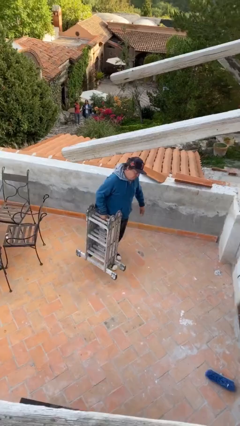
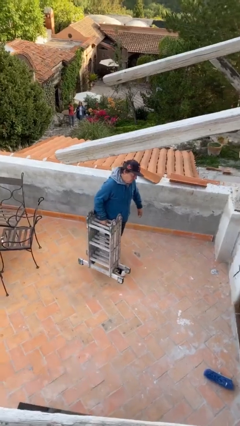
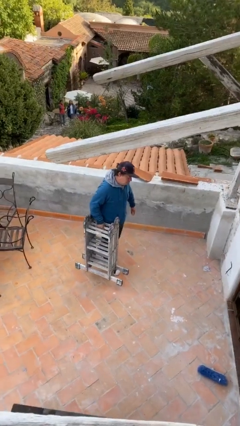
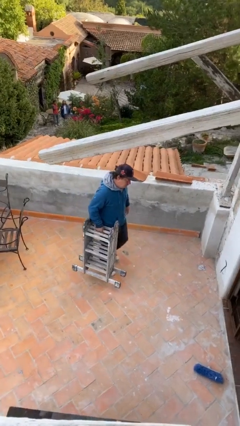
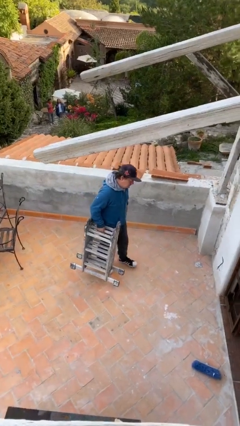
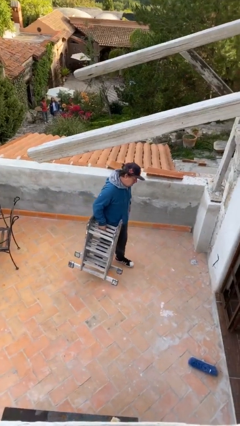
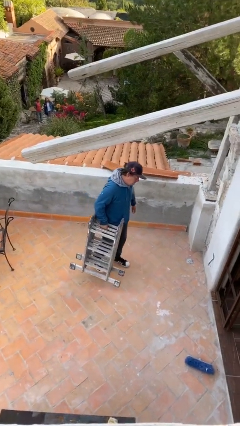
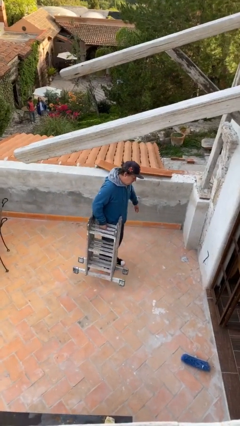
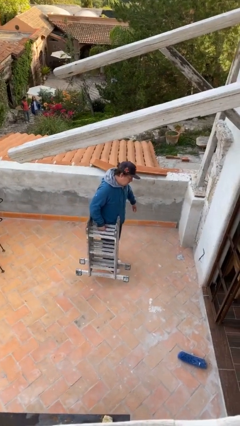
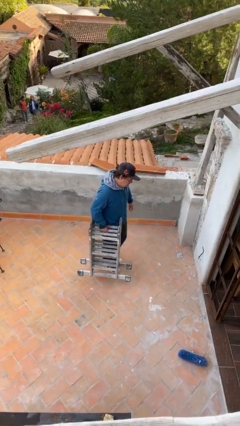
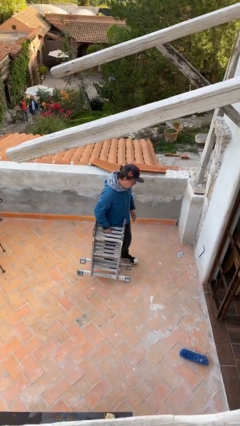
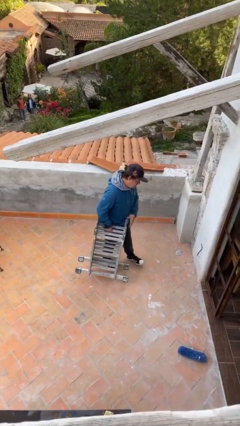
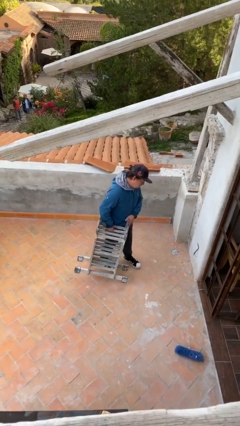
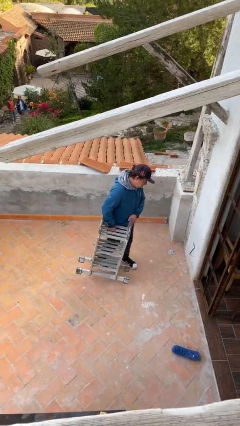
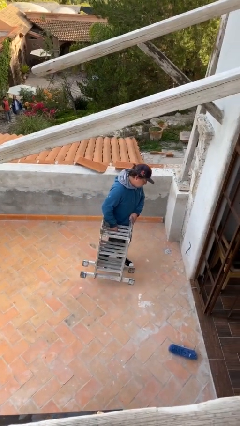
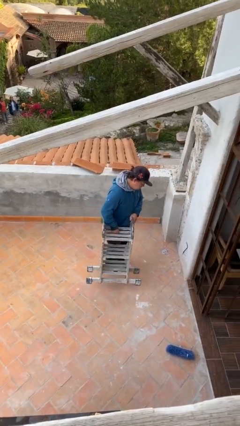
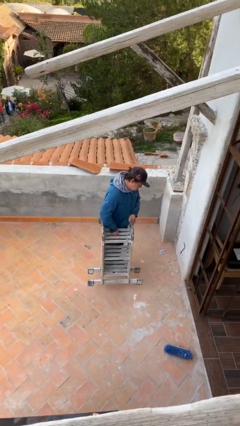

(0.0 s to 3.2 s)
person carries heavy object

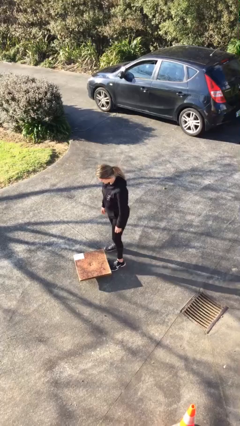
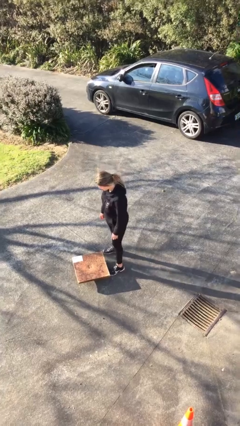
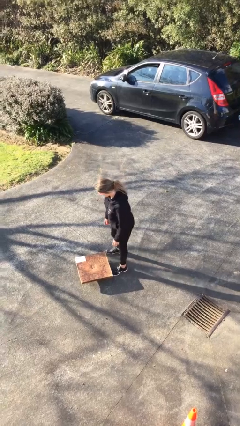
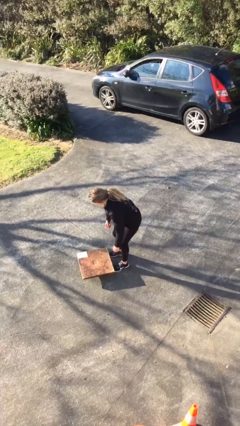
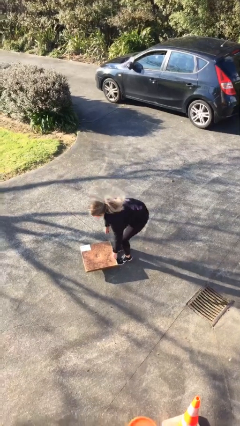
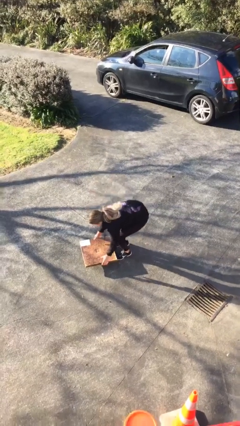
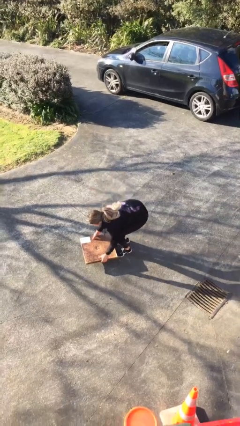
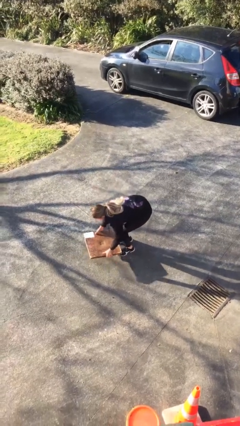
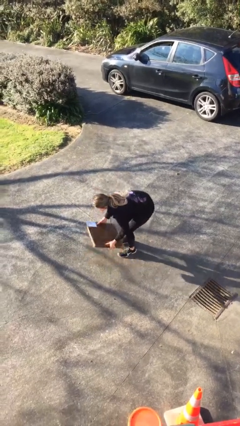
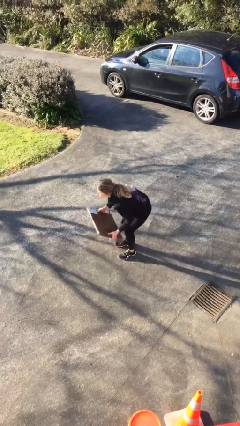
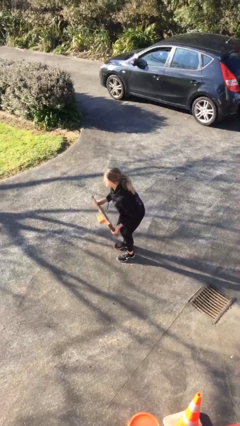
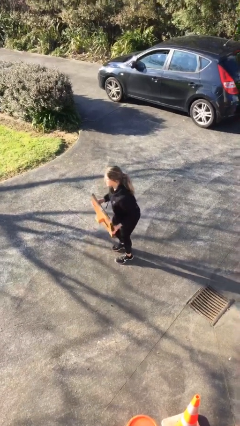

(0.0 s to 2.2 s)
person picks up object from floor

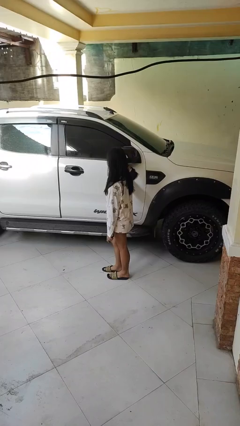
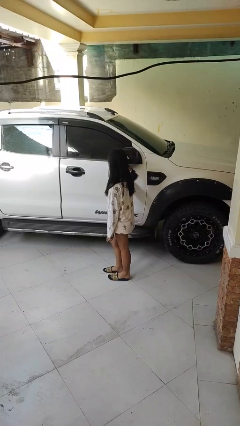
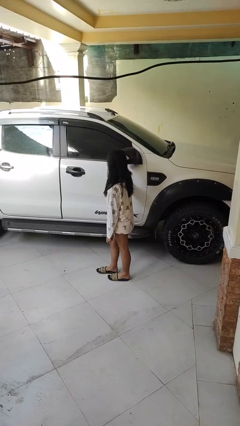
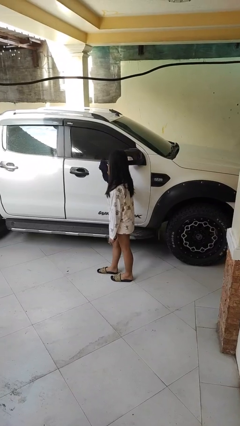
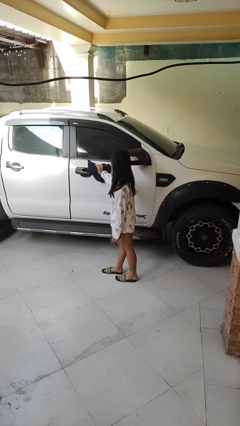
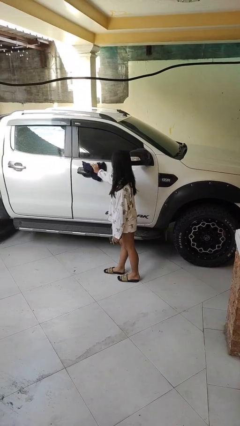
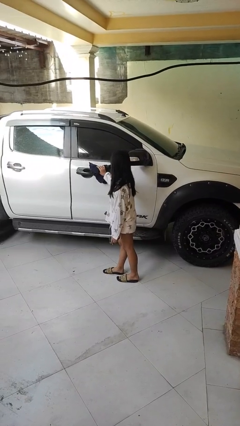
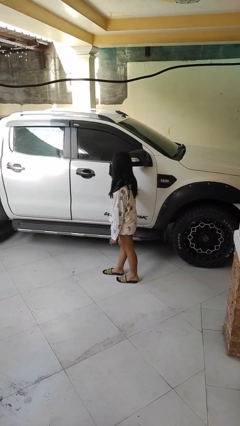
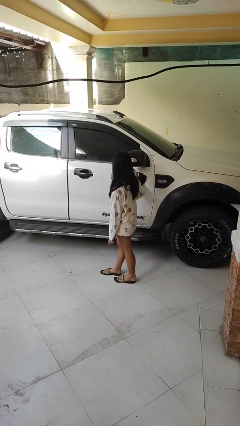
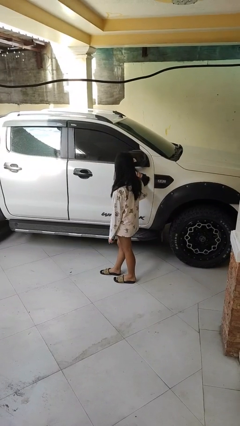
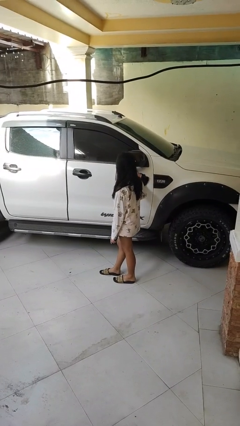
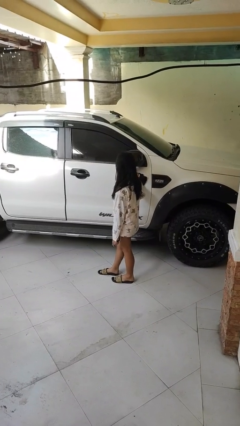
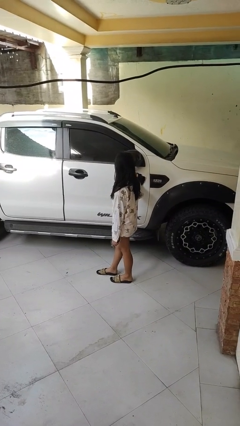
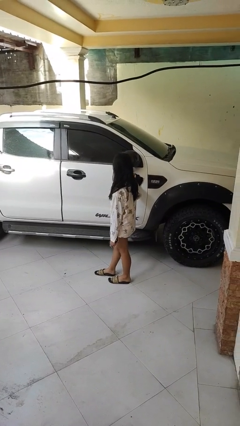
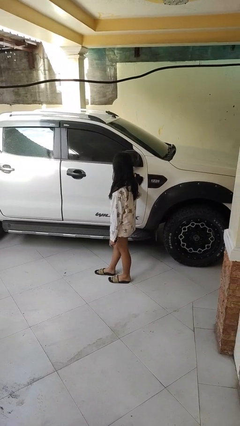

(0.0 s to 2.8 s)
person polishes car with rag

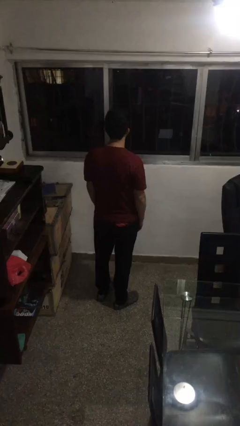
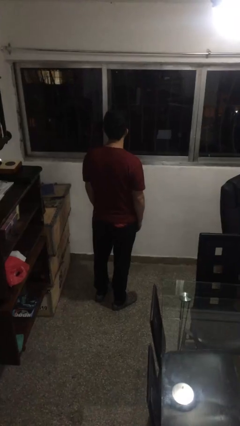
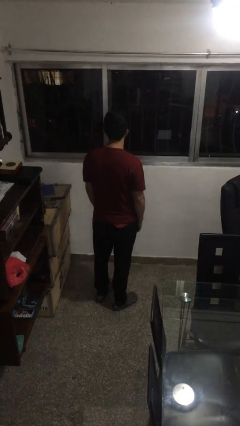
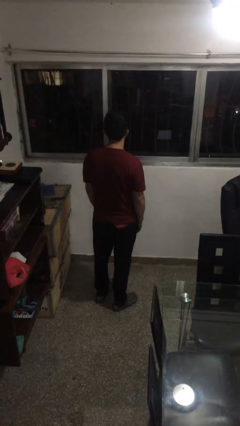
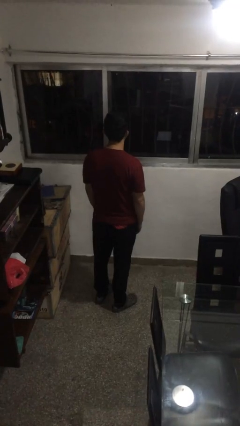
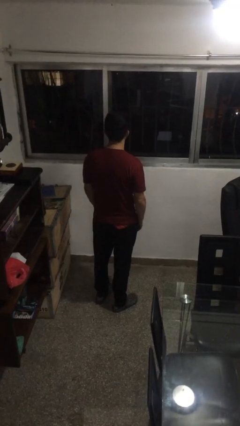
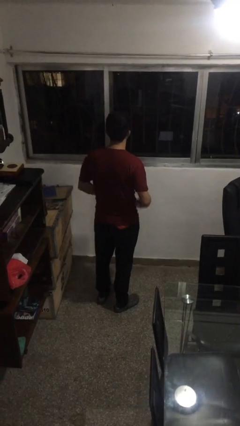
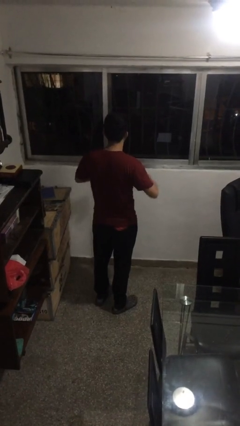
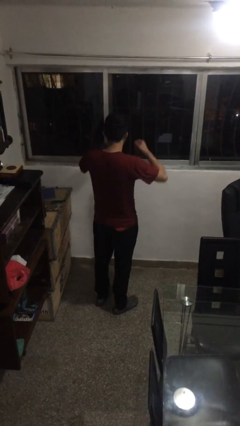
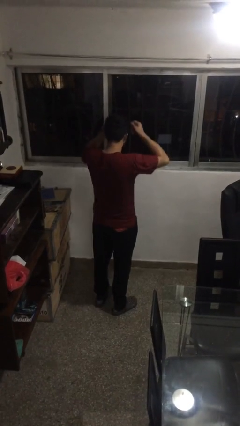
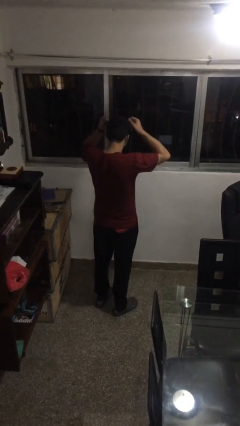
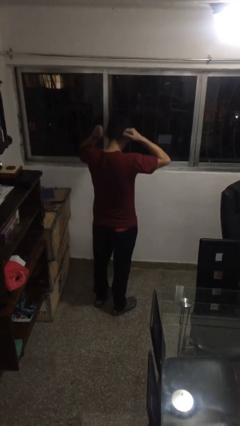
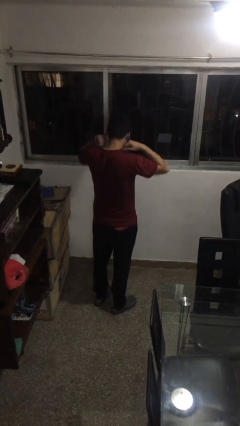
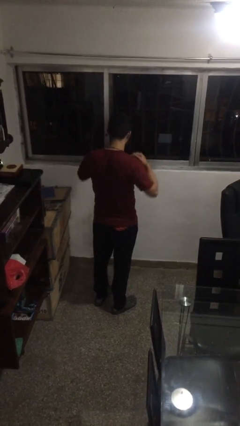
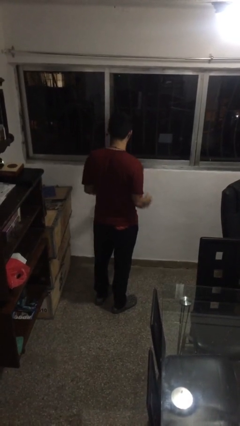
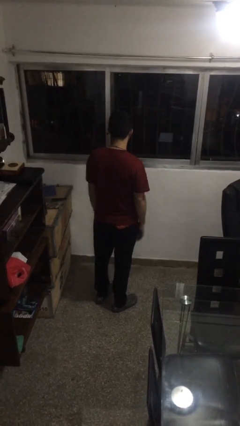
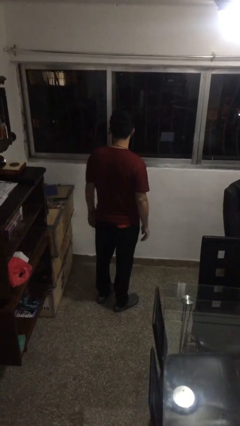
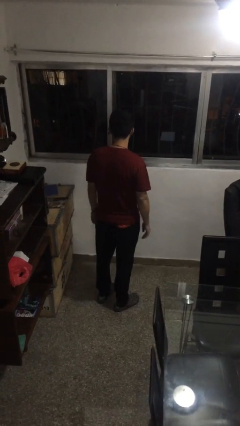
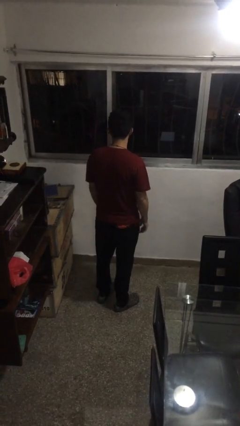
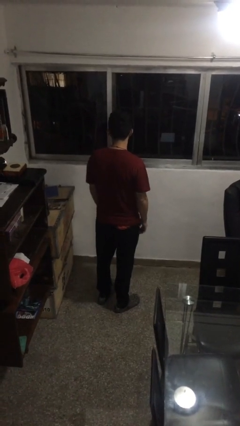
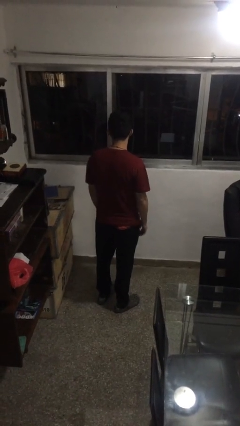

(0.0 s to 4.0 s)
person puts on necklace

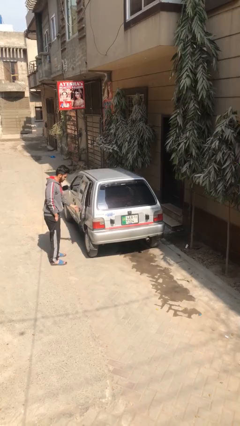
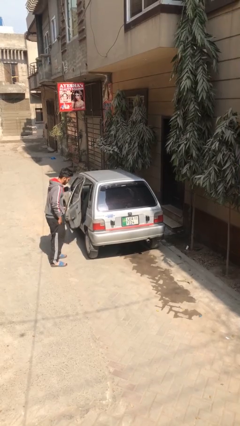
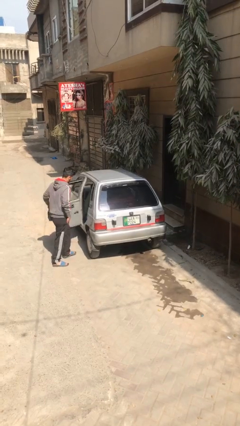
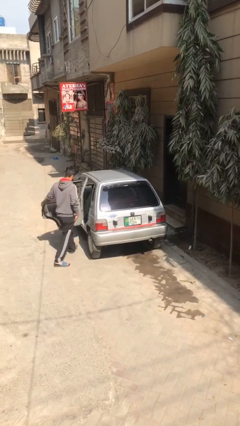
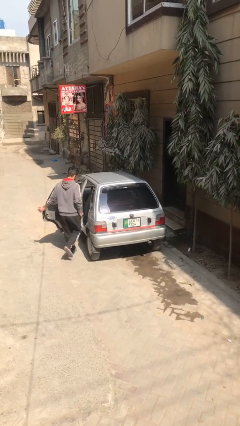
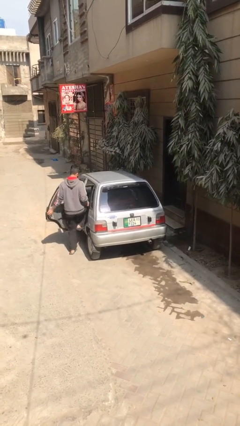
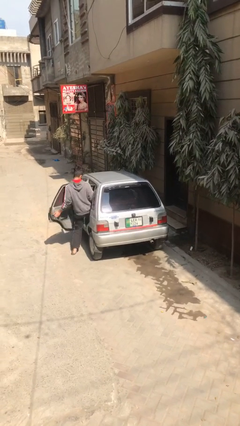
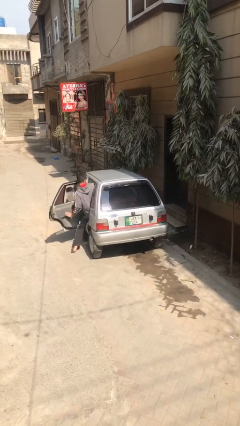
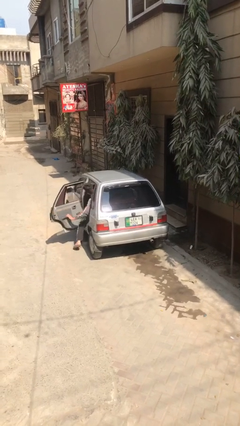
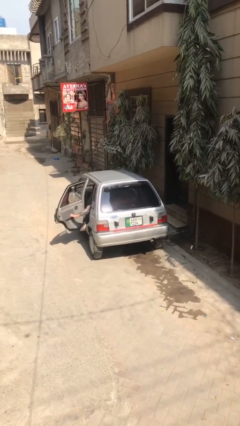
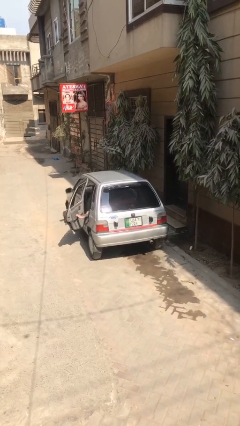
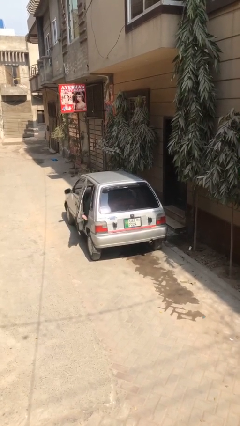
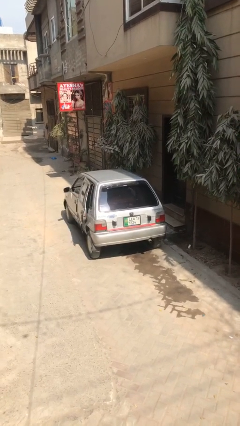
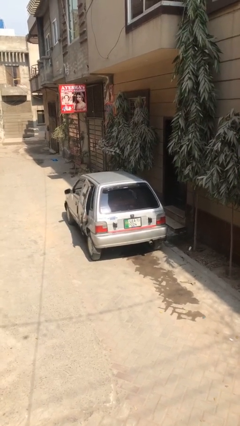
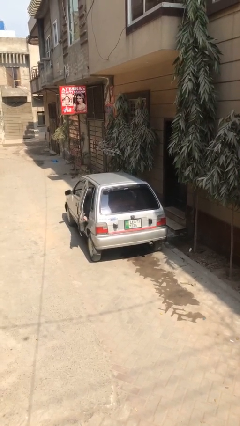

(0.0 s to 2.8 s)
car picks up person

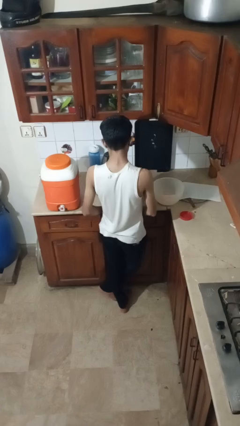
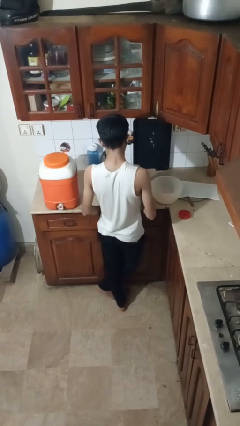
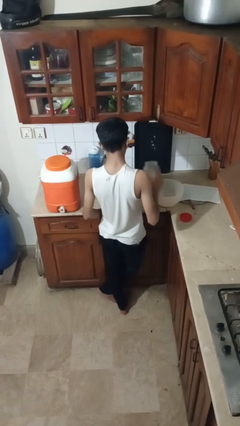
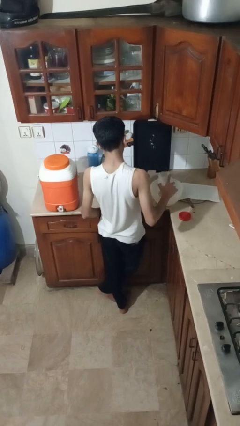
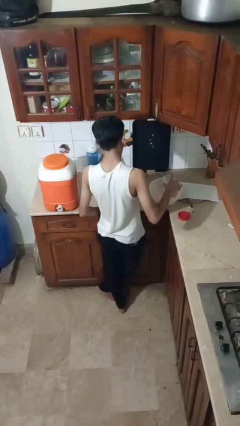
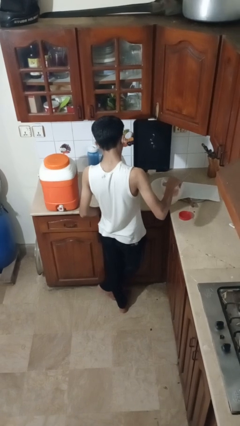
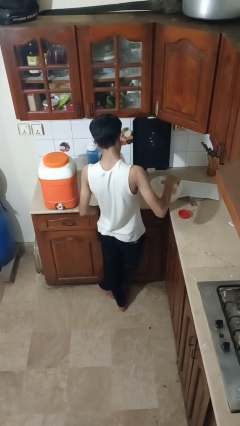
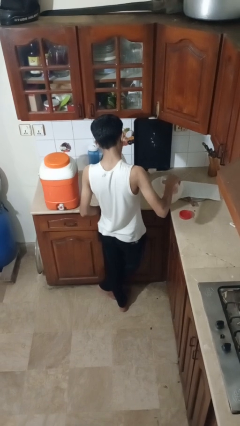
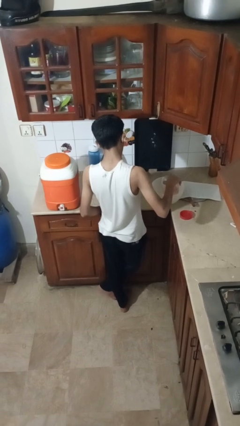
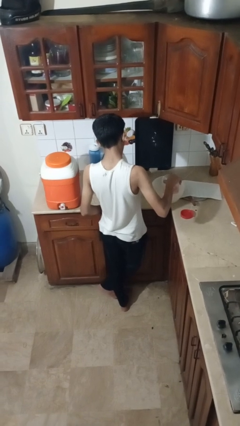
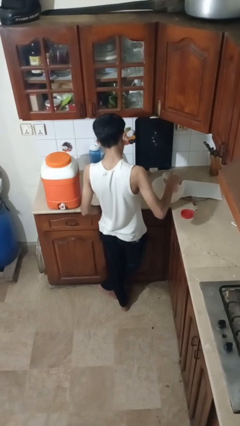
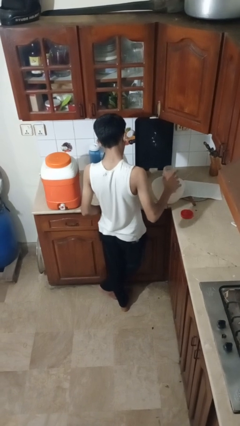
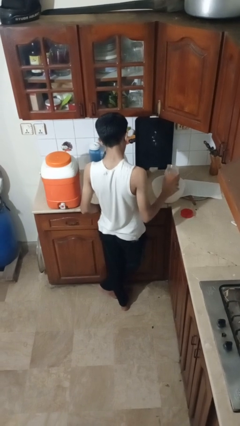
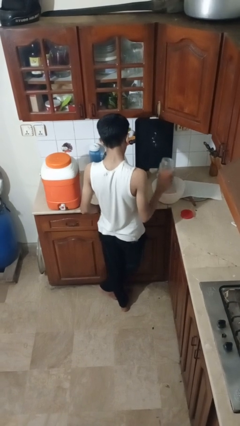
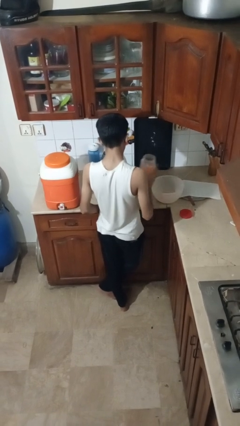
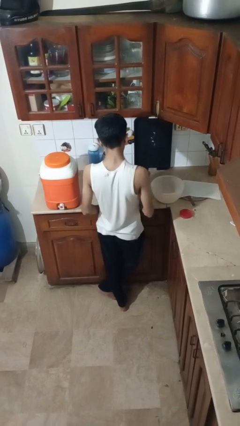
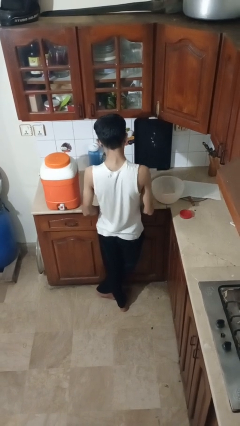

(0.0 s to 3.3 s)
person pours into bowl
